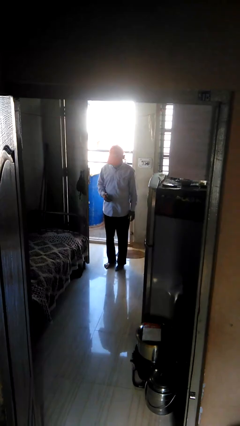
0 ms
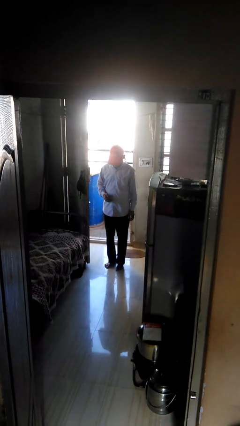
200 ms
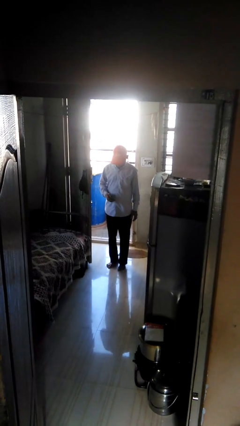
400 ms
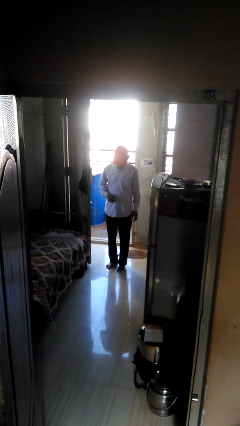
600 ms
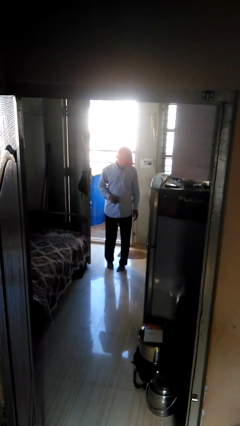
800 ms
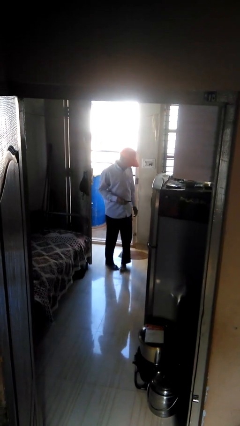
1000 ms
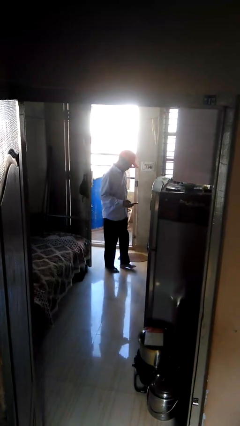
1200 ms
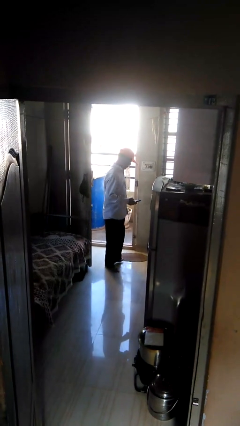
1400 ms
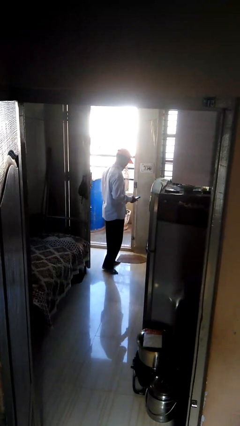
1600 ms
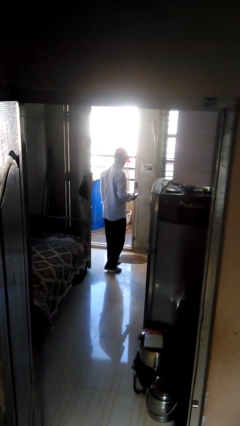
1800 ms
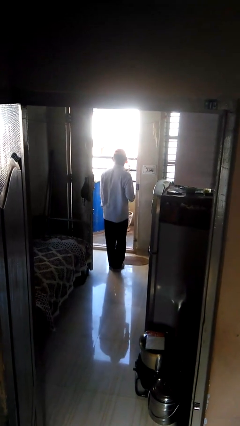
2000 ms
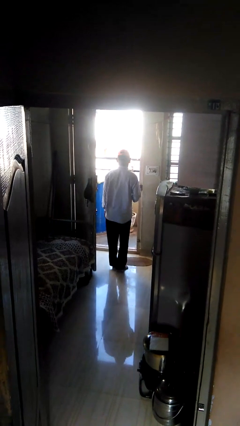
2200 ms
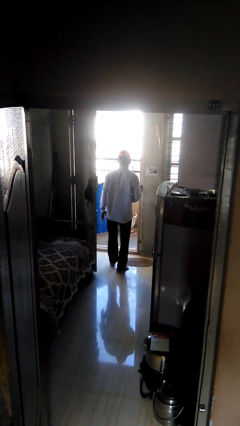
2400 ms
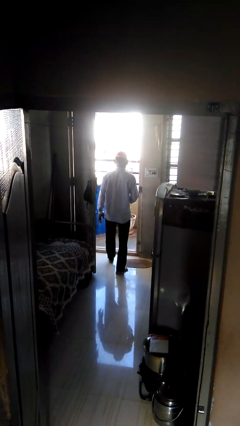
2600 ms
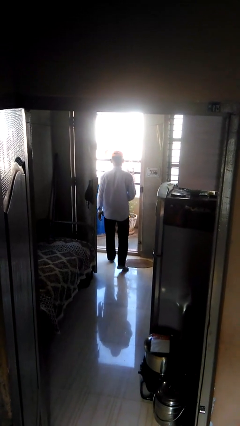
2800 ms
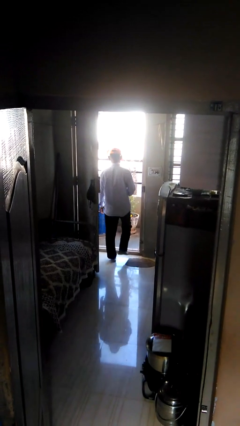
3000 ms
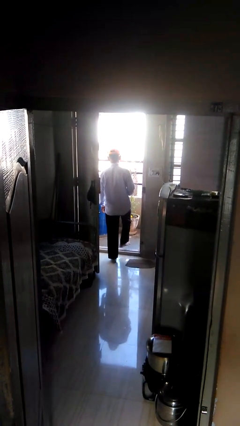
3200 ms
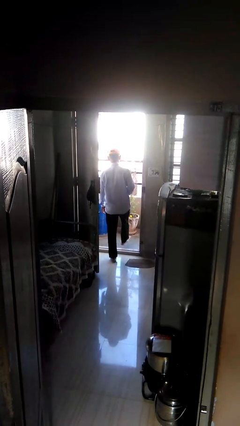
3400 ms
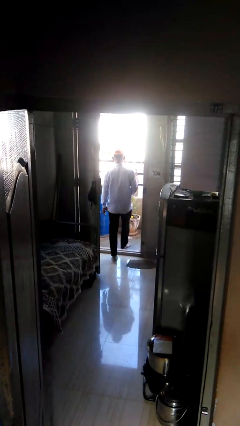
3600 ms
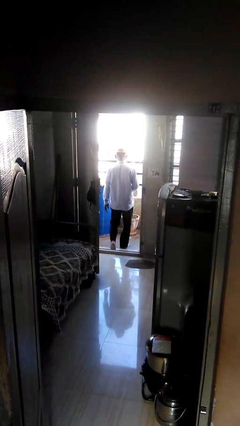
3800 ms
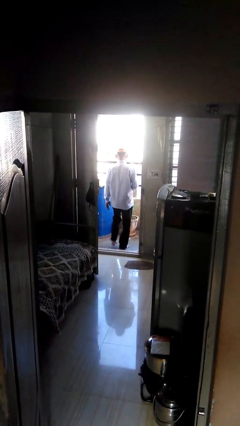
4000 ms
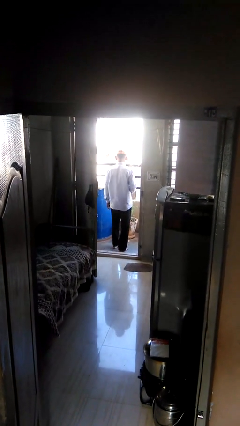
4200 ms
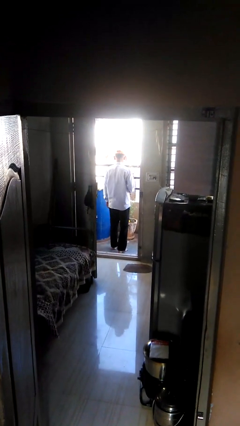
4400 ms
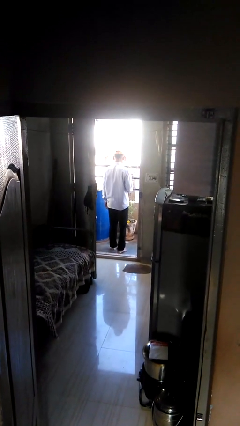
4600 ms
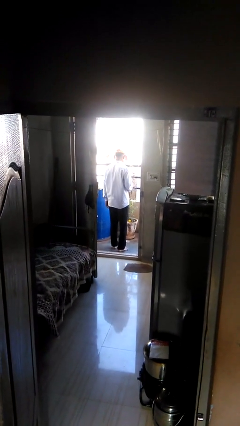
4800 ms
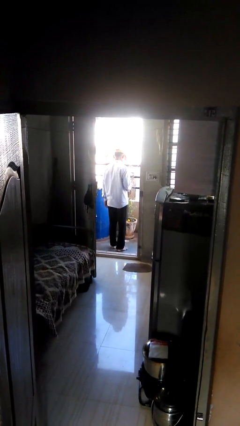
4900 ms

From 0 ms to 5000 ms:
person exits scene through structure

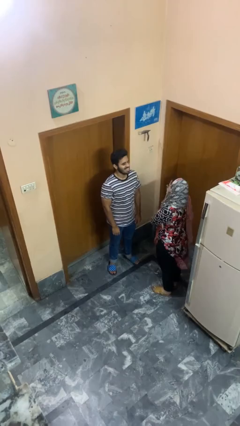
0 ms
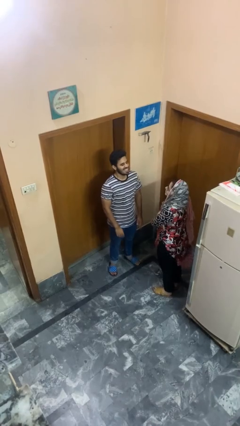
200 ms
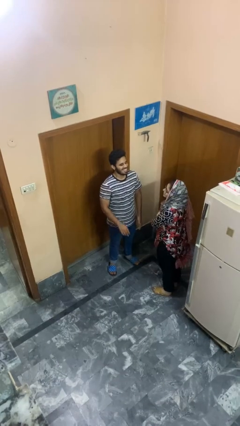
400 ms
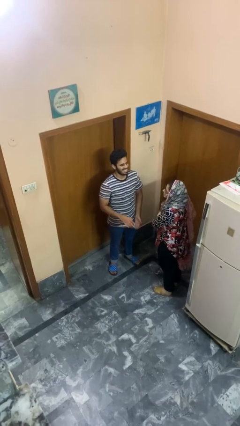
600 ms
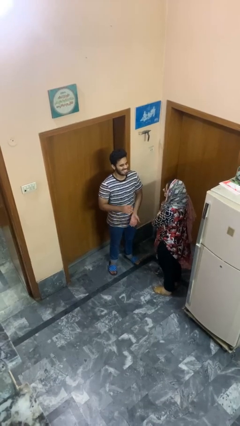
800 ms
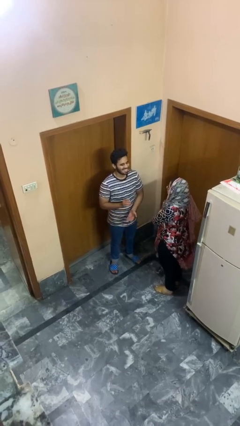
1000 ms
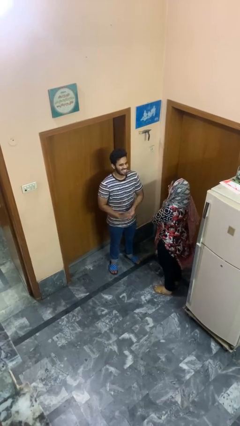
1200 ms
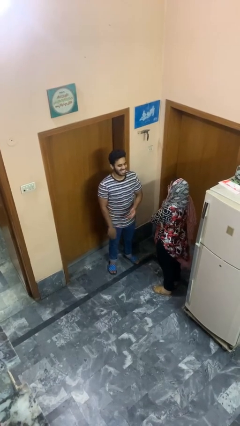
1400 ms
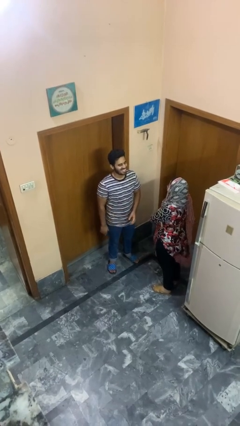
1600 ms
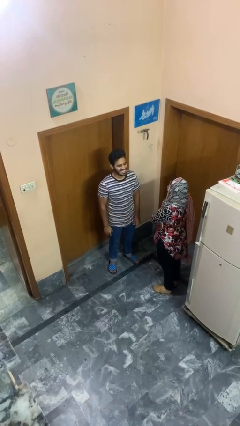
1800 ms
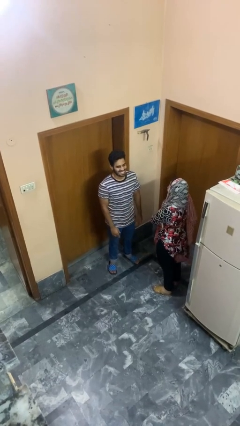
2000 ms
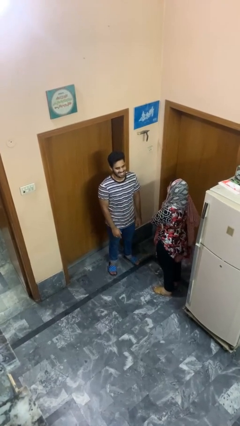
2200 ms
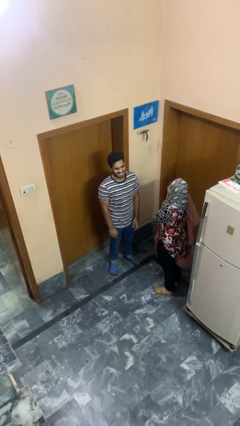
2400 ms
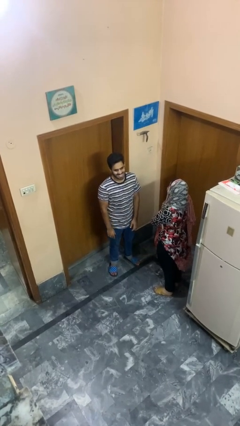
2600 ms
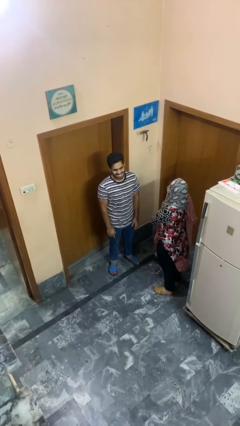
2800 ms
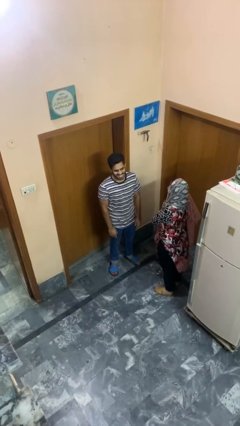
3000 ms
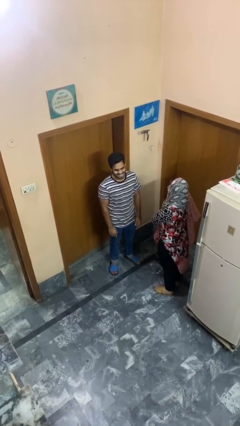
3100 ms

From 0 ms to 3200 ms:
person laughs with person

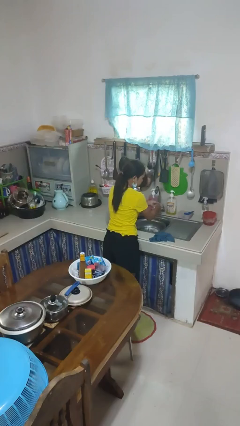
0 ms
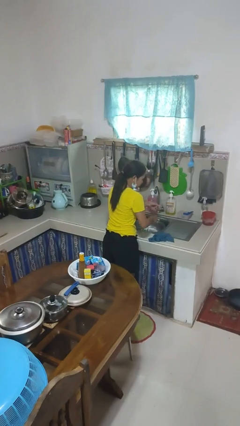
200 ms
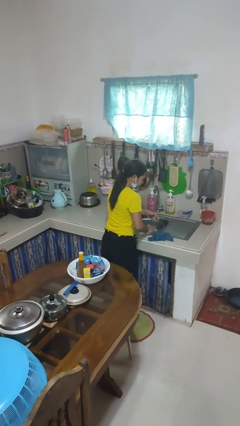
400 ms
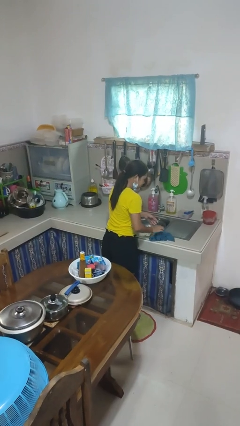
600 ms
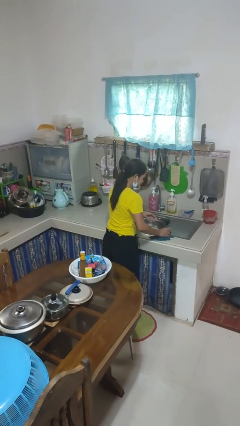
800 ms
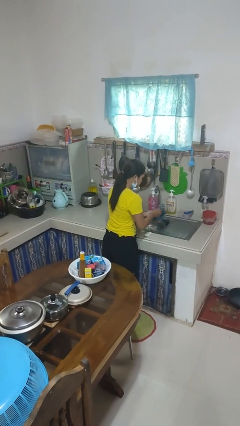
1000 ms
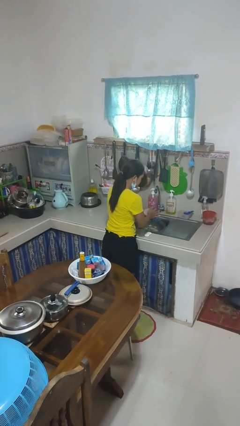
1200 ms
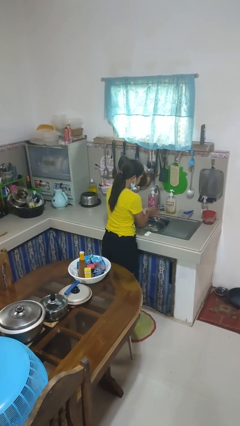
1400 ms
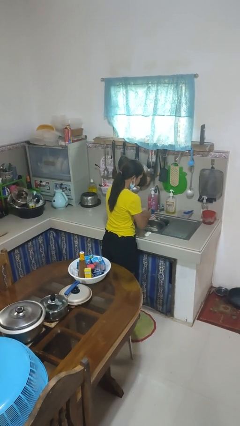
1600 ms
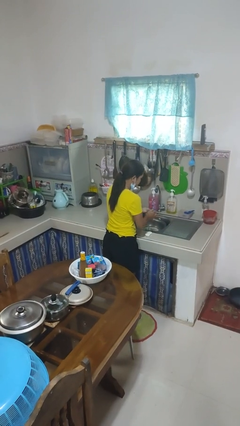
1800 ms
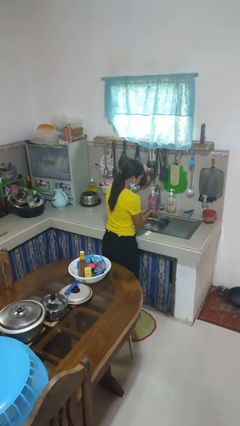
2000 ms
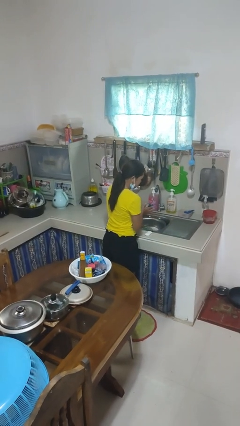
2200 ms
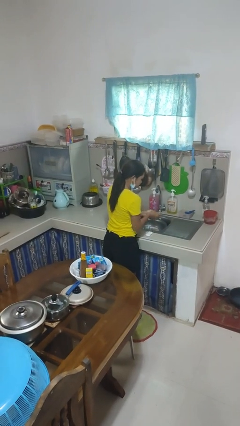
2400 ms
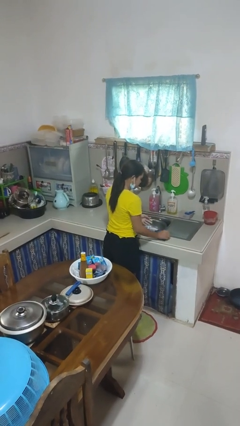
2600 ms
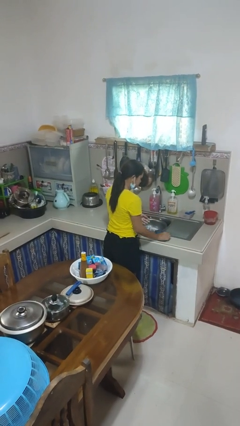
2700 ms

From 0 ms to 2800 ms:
person dries hands with towel

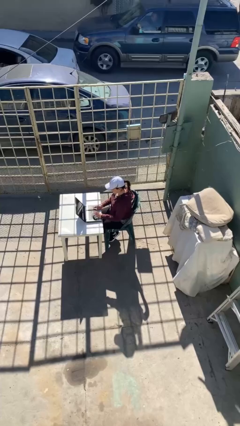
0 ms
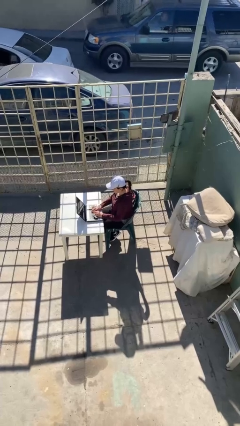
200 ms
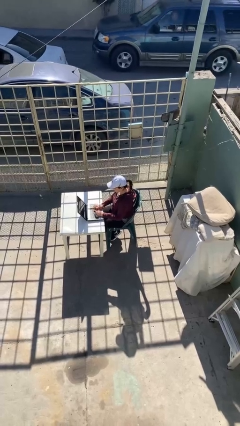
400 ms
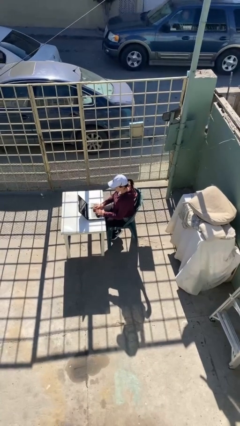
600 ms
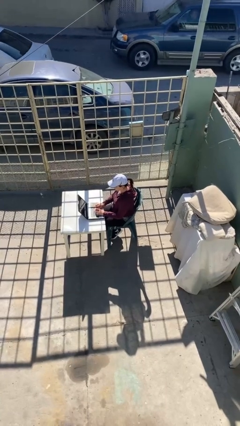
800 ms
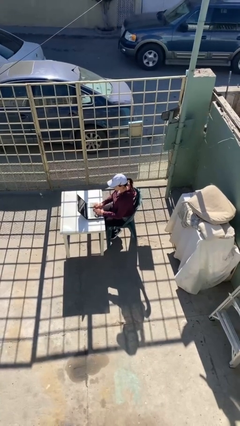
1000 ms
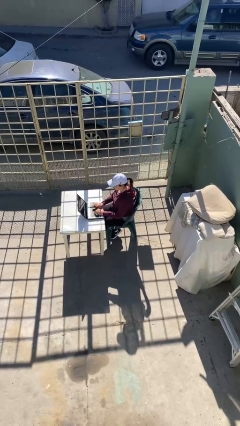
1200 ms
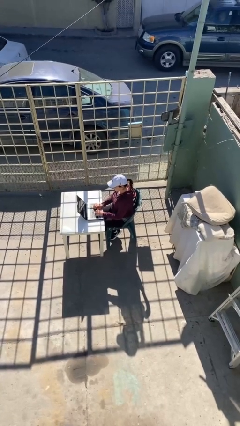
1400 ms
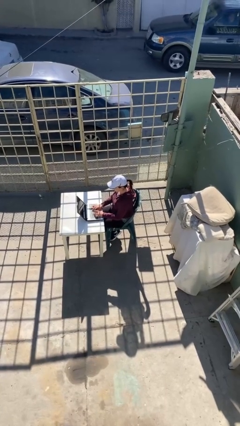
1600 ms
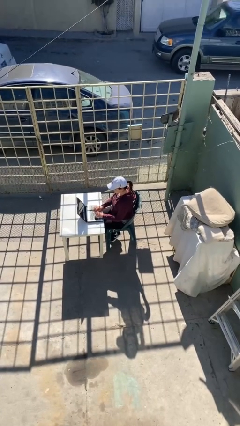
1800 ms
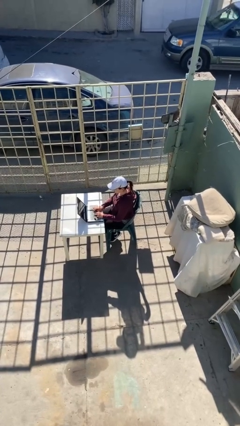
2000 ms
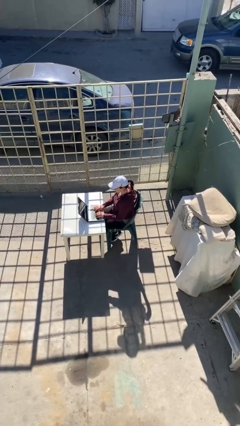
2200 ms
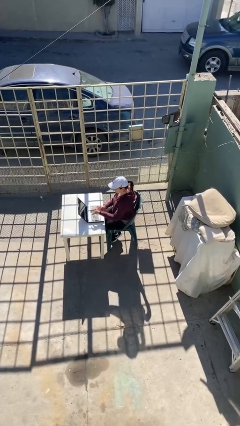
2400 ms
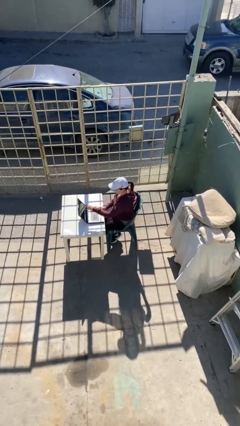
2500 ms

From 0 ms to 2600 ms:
person interacts with laptop

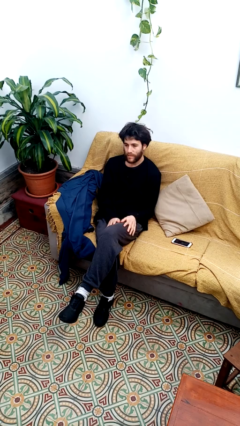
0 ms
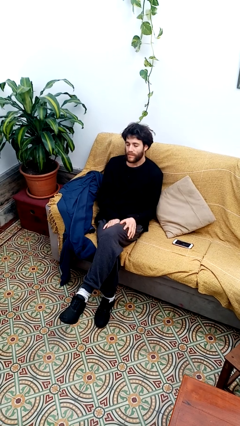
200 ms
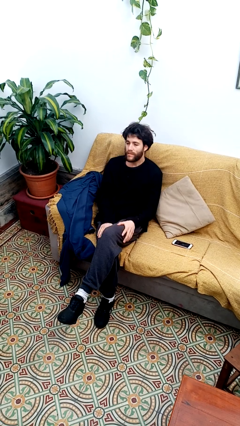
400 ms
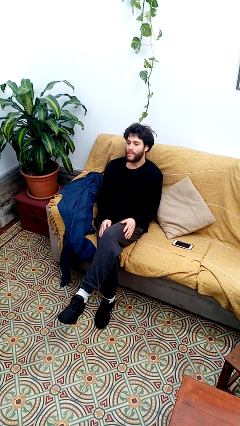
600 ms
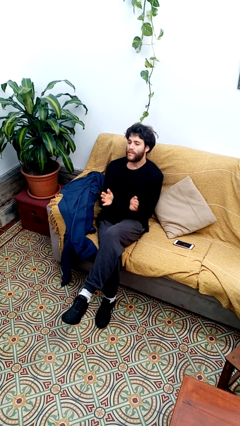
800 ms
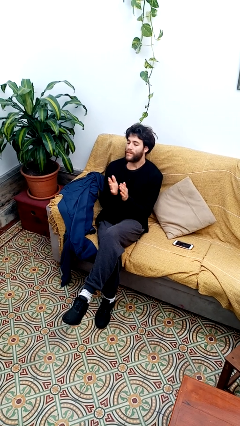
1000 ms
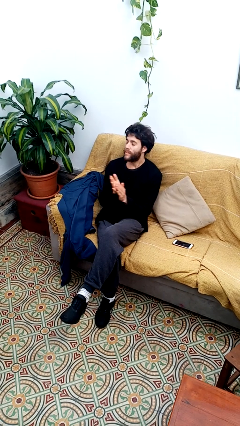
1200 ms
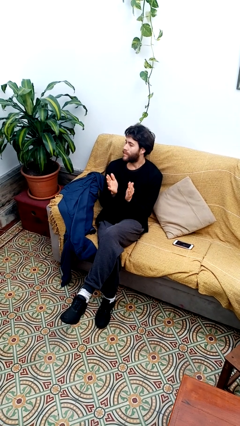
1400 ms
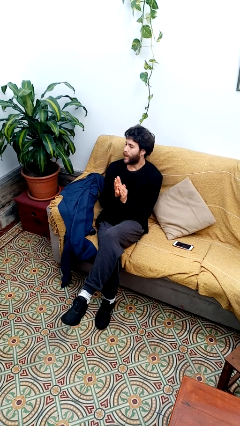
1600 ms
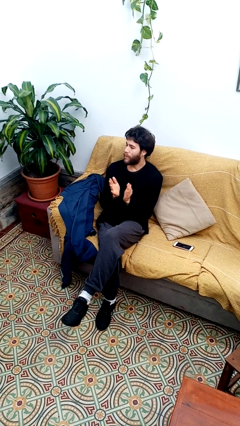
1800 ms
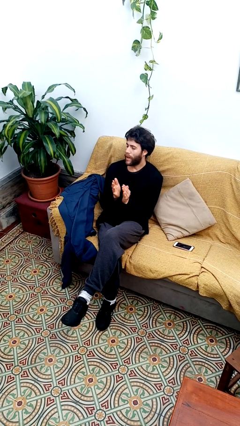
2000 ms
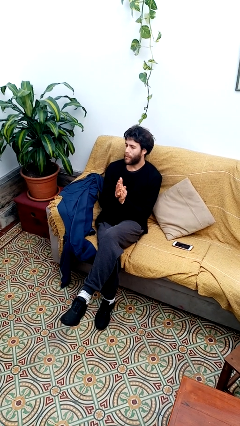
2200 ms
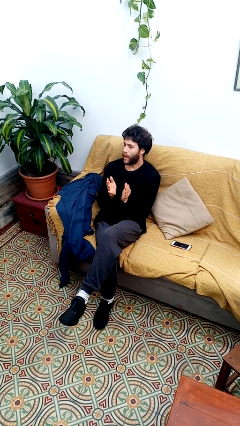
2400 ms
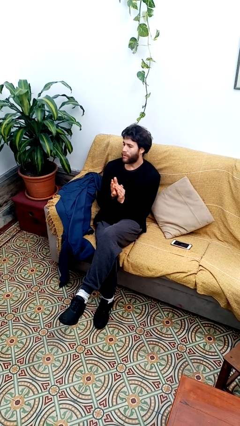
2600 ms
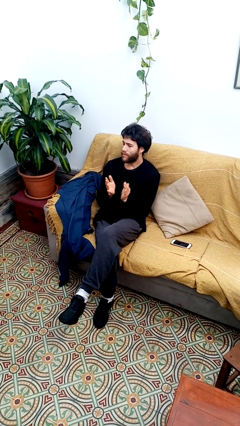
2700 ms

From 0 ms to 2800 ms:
person claps hands

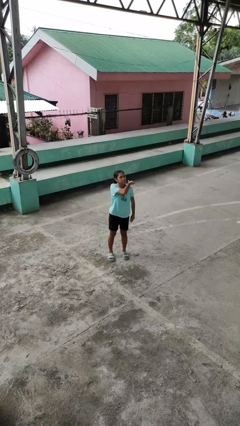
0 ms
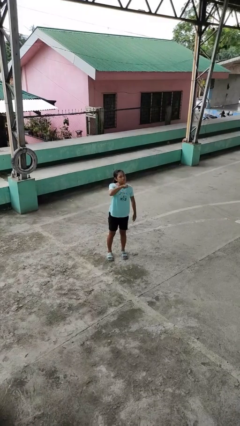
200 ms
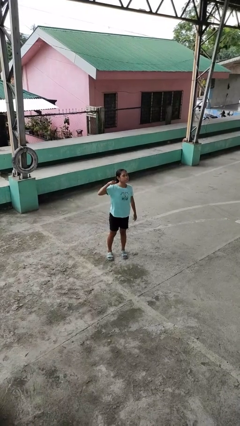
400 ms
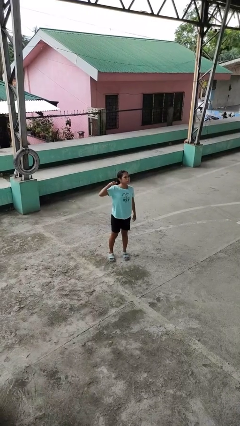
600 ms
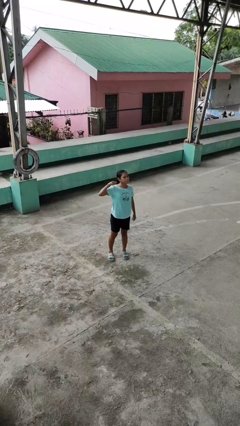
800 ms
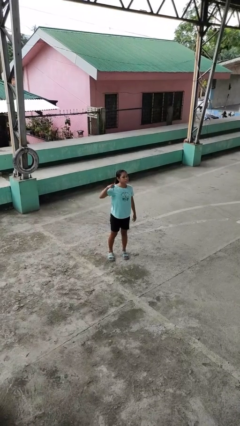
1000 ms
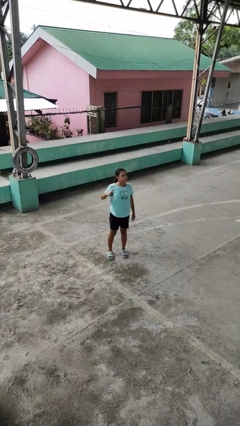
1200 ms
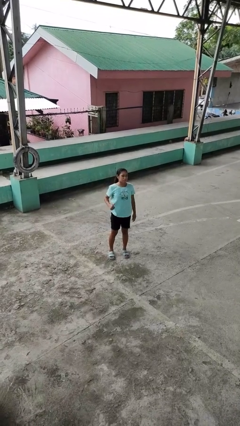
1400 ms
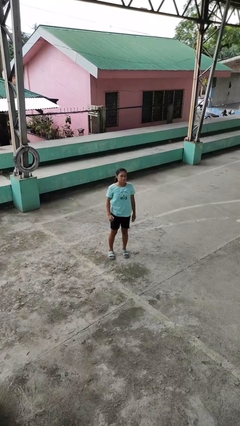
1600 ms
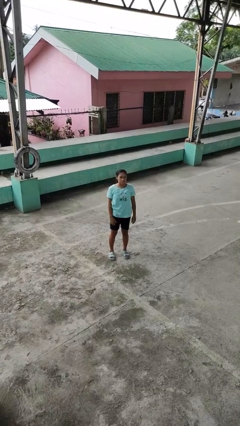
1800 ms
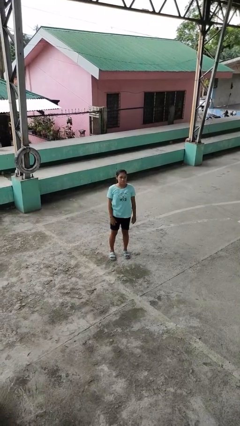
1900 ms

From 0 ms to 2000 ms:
person gestures cut
